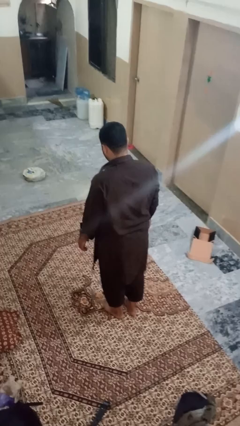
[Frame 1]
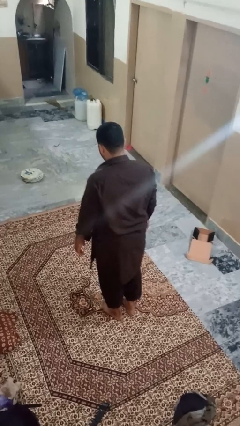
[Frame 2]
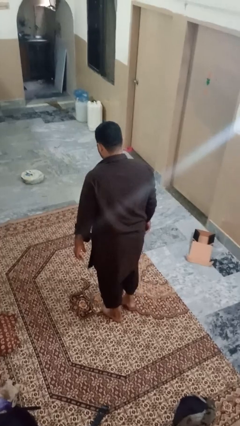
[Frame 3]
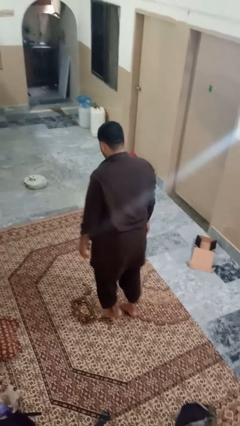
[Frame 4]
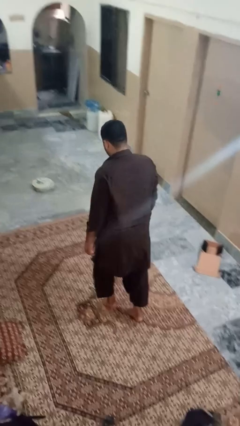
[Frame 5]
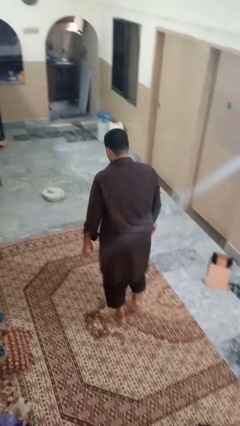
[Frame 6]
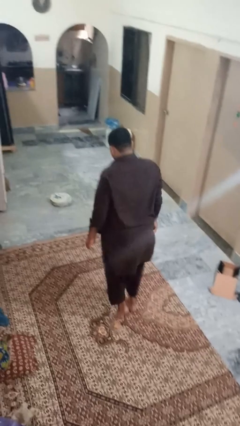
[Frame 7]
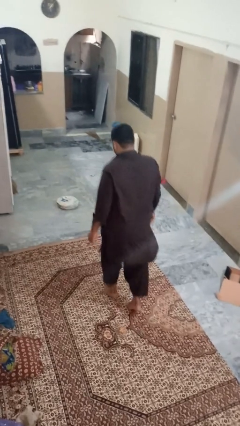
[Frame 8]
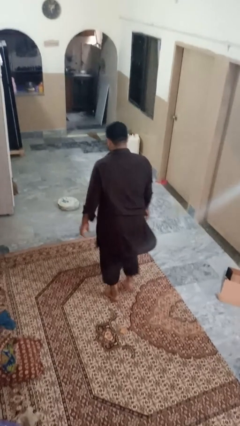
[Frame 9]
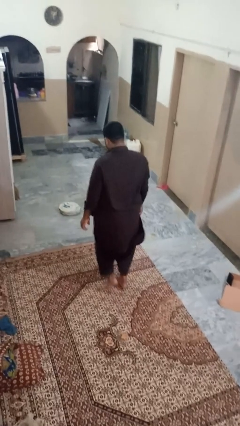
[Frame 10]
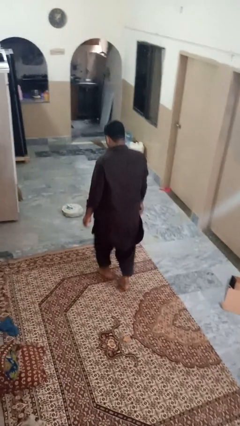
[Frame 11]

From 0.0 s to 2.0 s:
person walks tiptoe

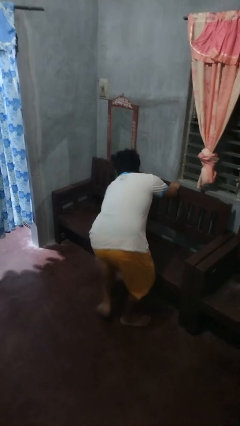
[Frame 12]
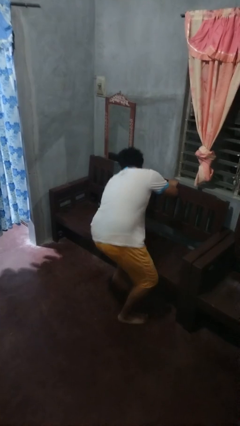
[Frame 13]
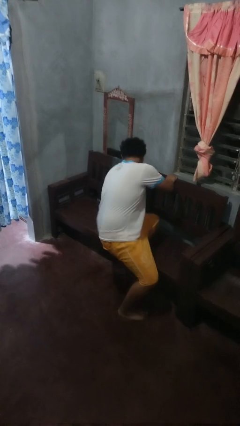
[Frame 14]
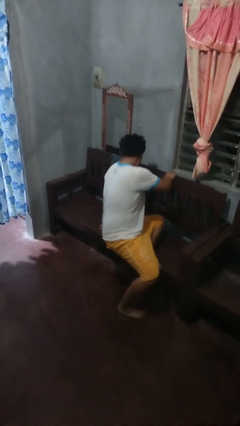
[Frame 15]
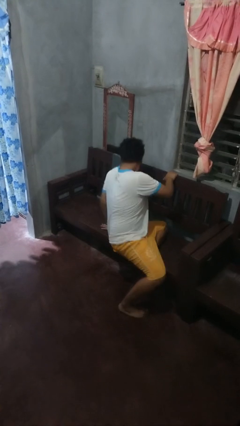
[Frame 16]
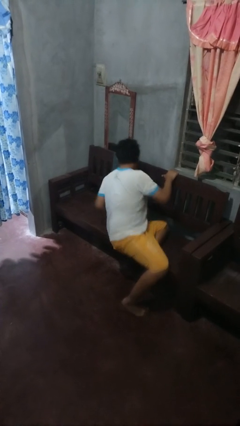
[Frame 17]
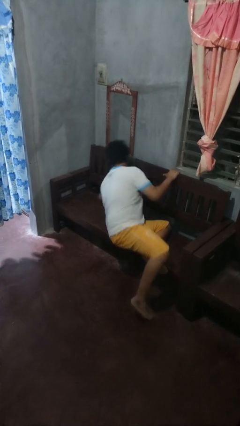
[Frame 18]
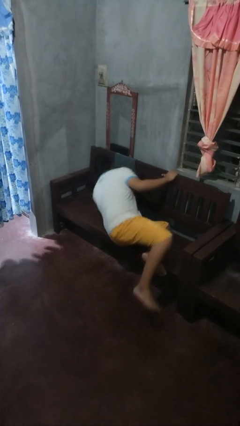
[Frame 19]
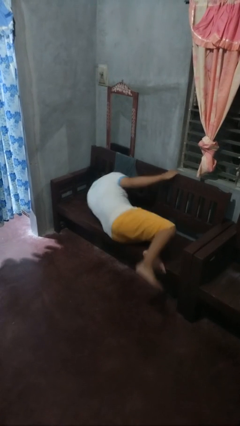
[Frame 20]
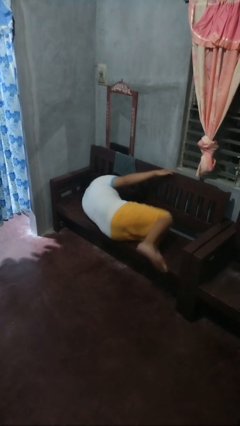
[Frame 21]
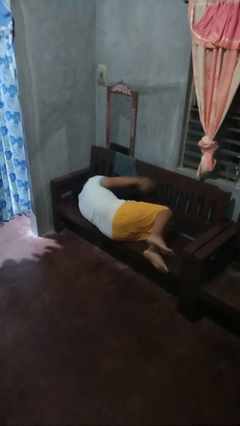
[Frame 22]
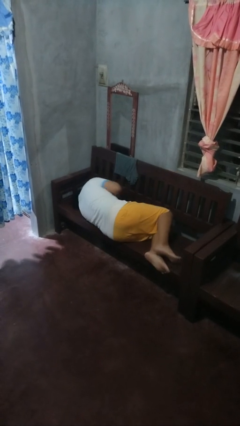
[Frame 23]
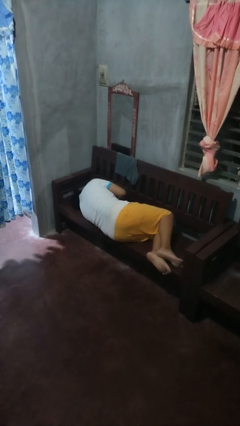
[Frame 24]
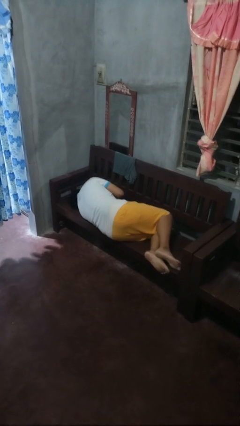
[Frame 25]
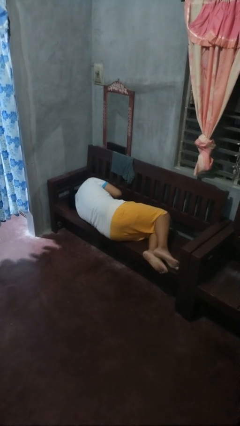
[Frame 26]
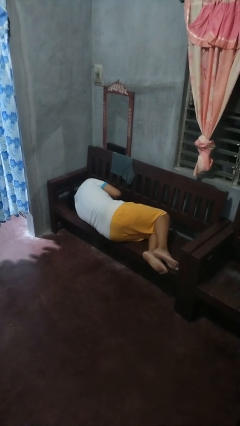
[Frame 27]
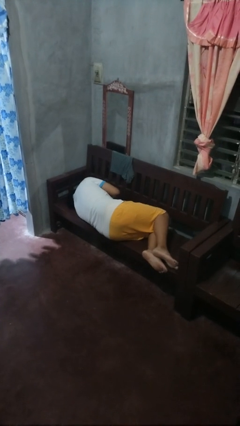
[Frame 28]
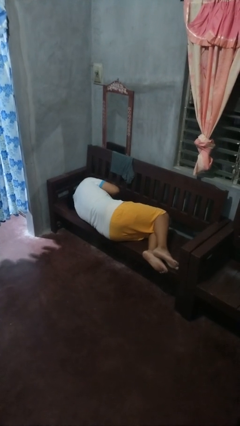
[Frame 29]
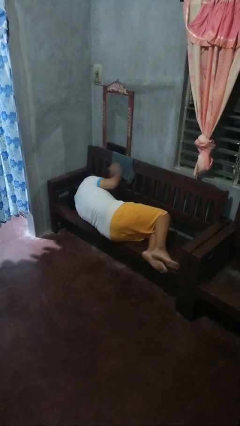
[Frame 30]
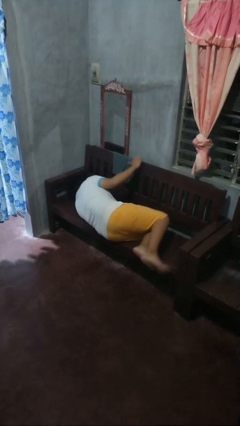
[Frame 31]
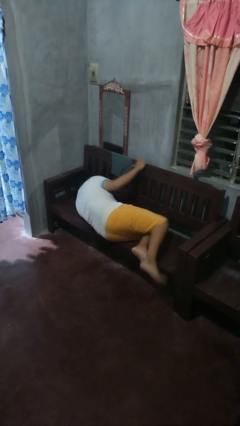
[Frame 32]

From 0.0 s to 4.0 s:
person lies down on couch

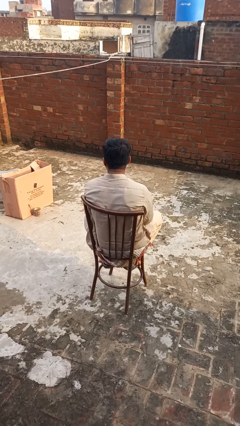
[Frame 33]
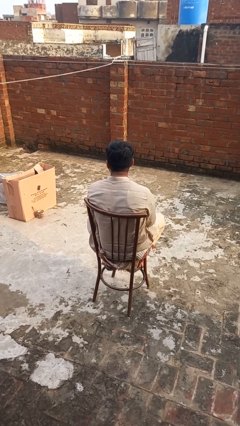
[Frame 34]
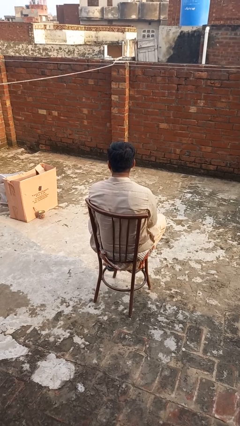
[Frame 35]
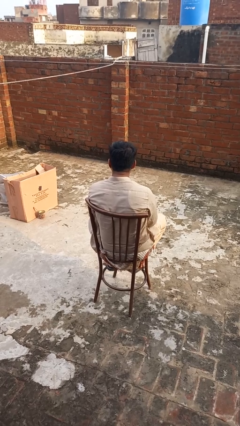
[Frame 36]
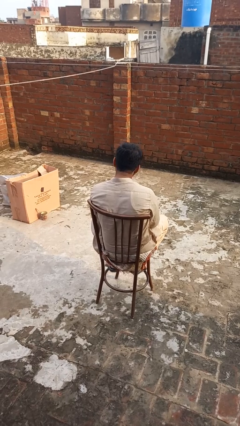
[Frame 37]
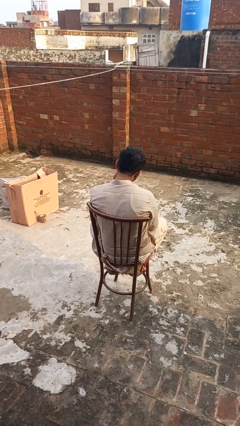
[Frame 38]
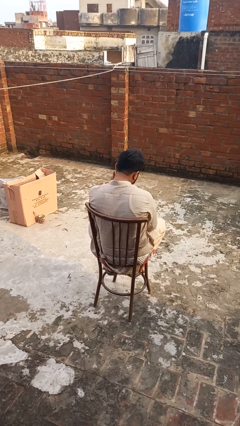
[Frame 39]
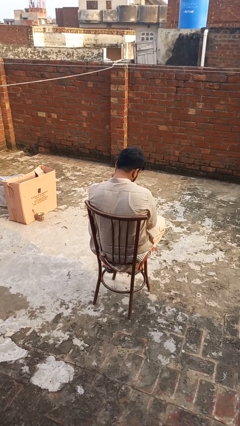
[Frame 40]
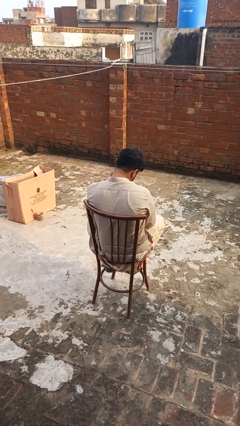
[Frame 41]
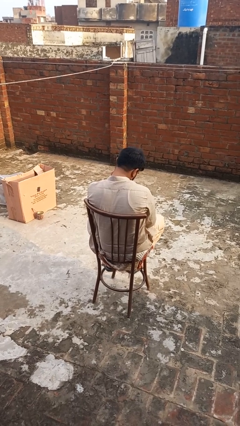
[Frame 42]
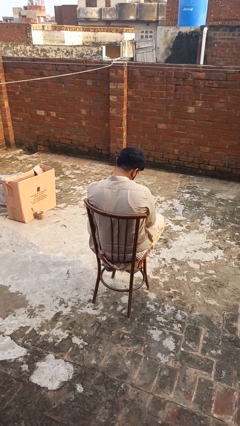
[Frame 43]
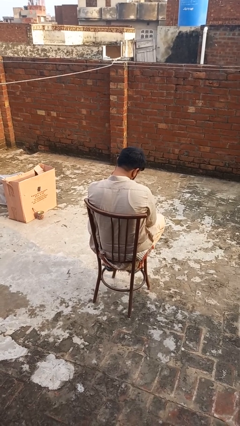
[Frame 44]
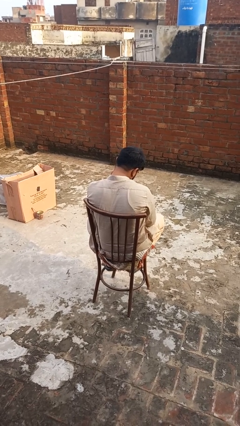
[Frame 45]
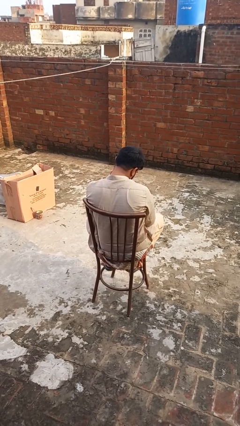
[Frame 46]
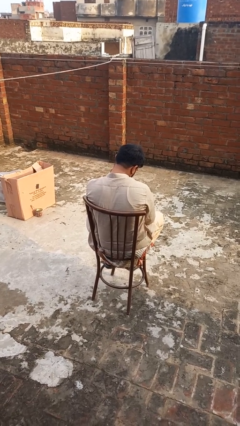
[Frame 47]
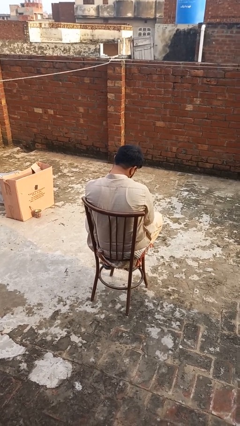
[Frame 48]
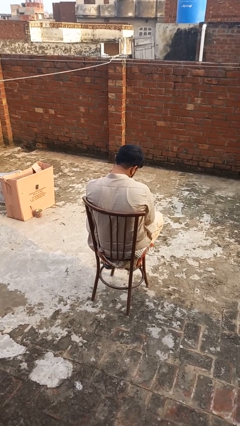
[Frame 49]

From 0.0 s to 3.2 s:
person gestures listen closely

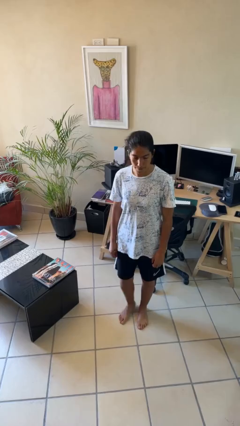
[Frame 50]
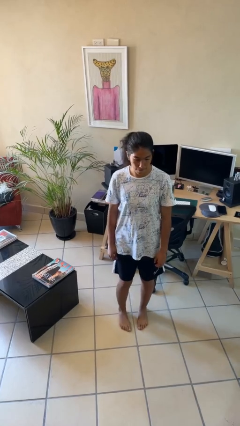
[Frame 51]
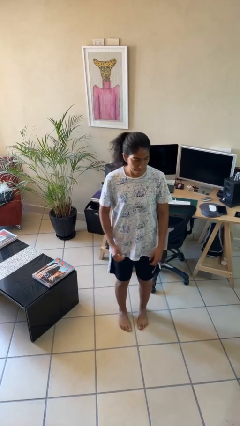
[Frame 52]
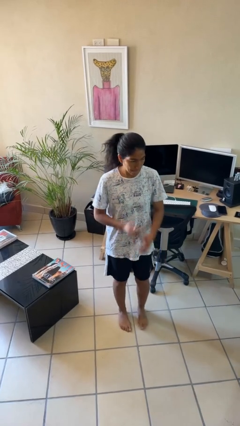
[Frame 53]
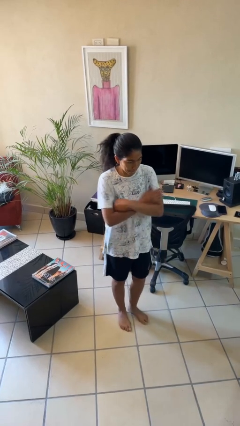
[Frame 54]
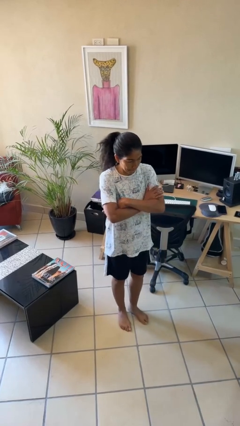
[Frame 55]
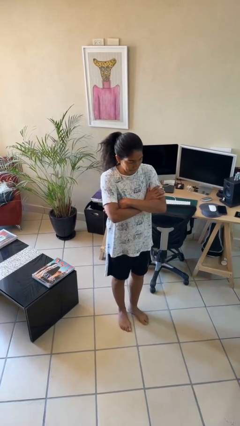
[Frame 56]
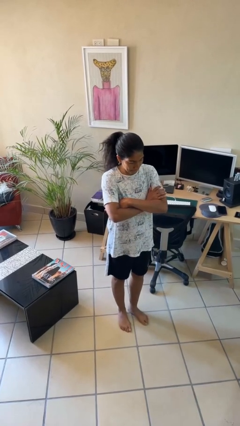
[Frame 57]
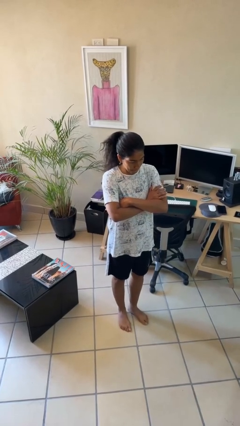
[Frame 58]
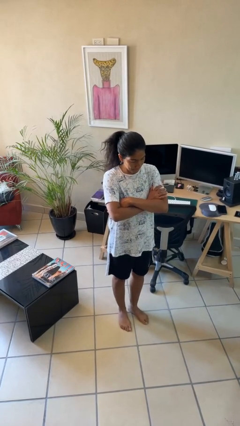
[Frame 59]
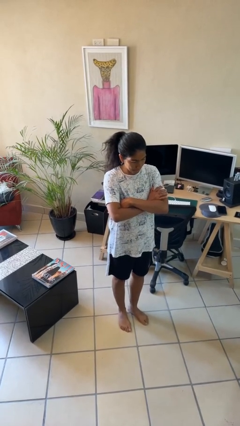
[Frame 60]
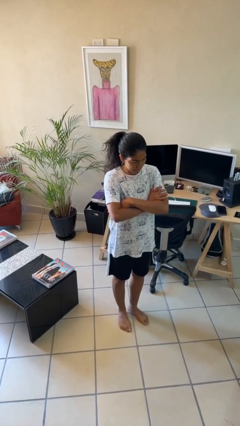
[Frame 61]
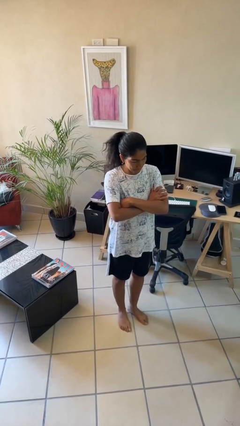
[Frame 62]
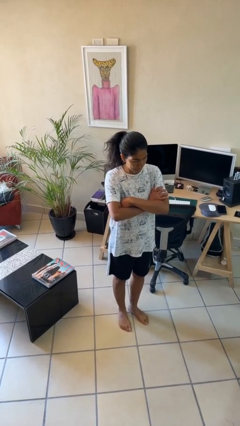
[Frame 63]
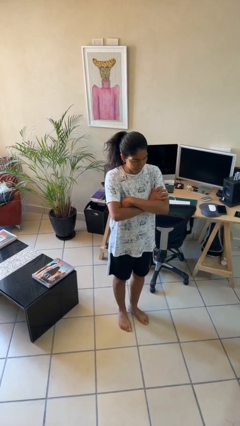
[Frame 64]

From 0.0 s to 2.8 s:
person crosses arms

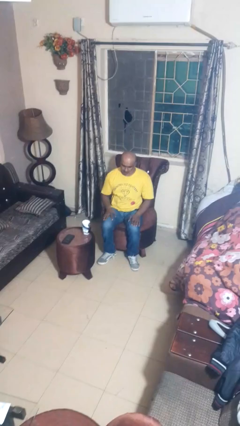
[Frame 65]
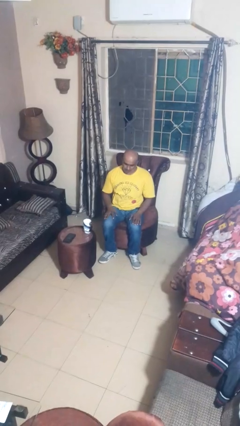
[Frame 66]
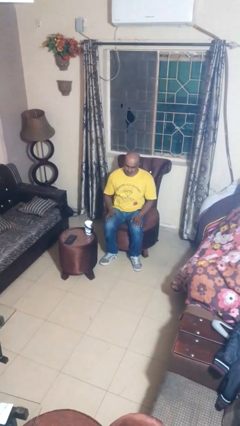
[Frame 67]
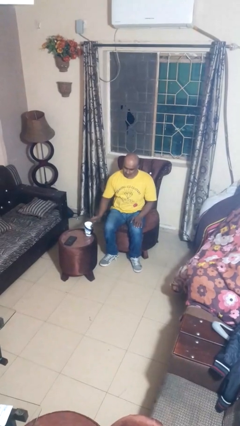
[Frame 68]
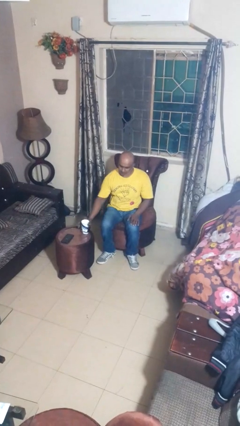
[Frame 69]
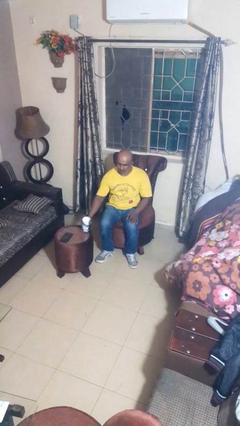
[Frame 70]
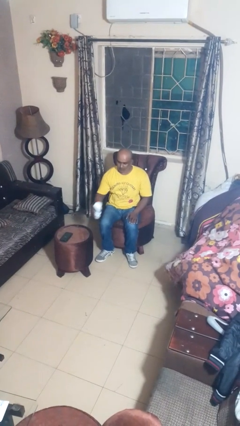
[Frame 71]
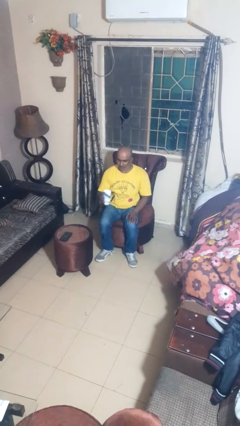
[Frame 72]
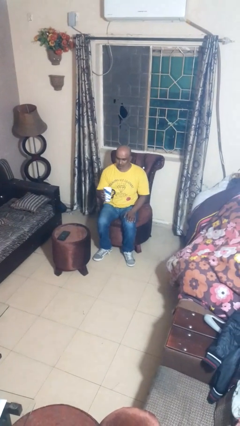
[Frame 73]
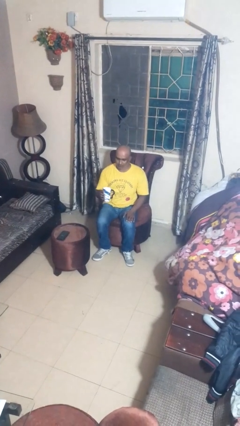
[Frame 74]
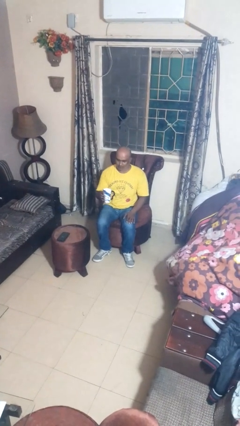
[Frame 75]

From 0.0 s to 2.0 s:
person picks up object from table

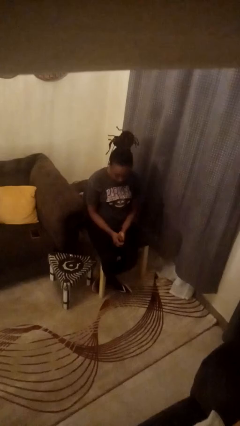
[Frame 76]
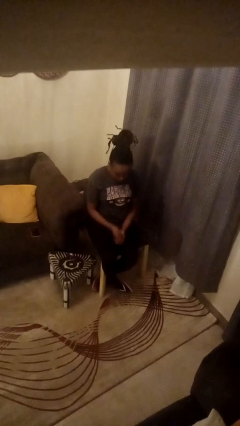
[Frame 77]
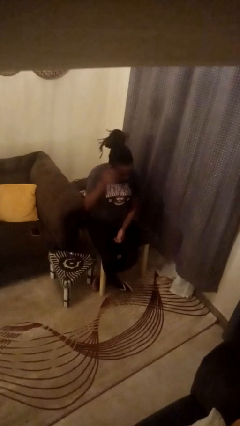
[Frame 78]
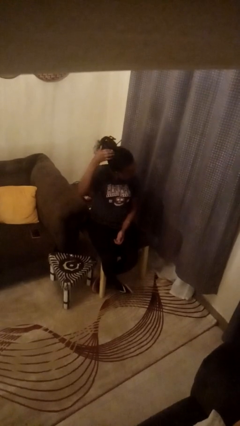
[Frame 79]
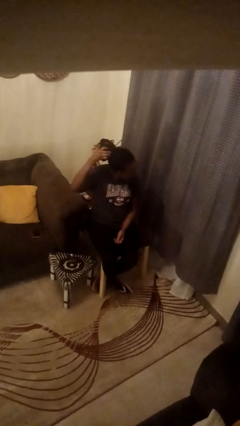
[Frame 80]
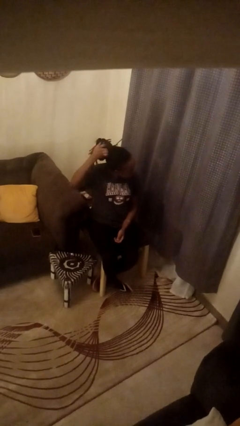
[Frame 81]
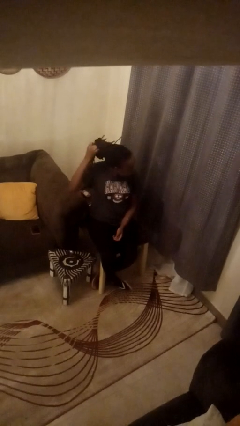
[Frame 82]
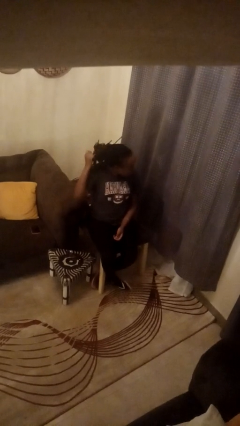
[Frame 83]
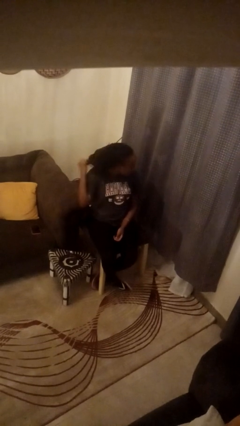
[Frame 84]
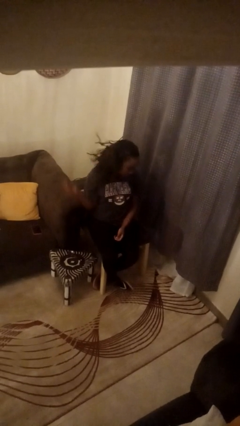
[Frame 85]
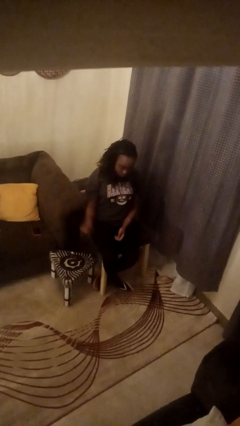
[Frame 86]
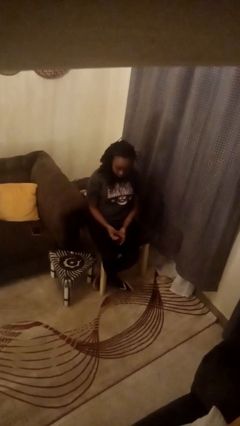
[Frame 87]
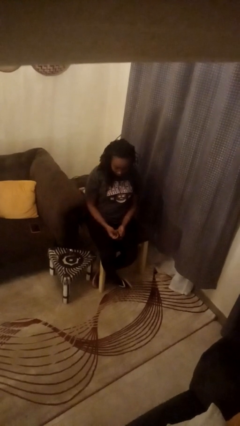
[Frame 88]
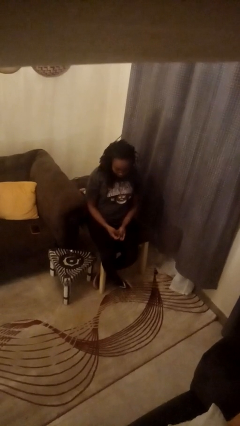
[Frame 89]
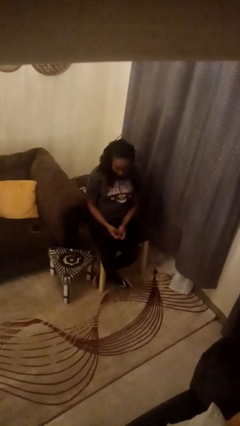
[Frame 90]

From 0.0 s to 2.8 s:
person takes off hairtie

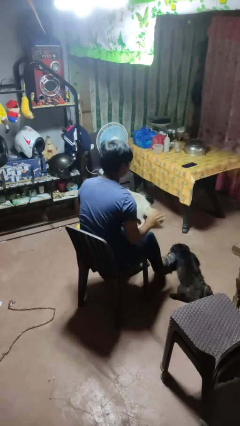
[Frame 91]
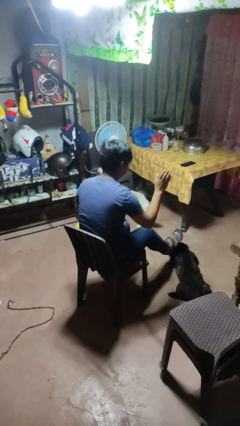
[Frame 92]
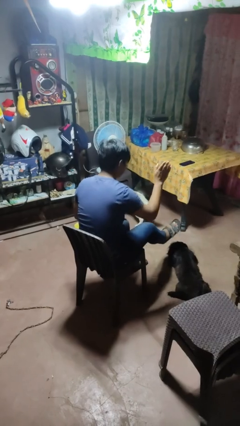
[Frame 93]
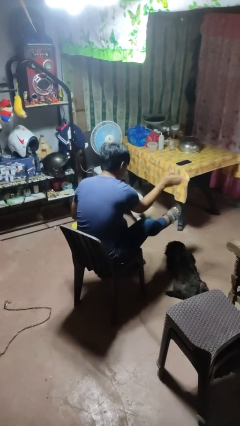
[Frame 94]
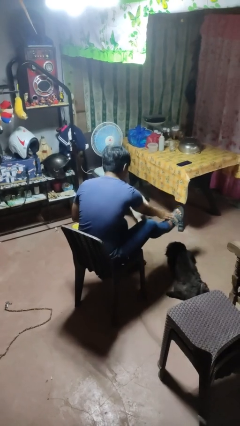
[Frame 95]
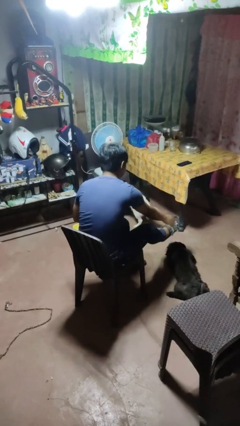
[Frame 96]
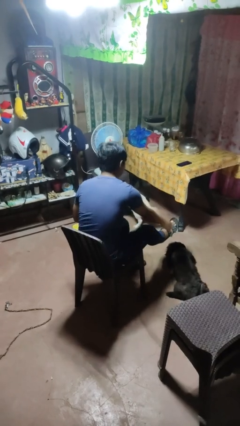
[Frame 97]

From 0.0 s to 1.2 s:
person swats bug
